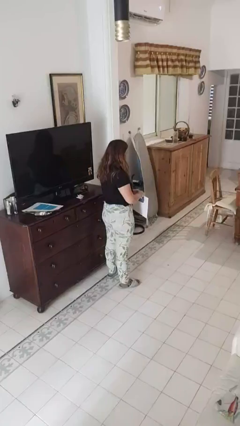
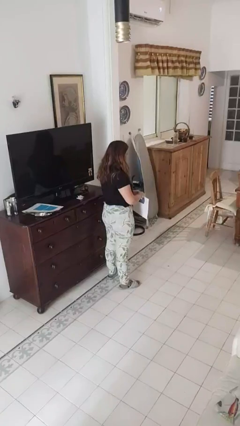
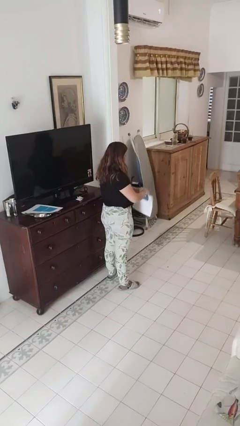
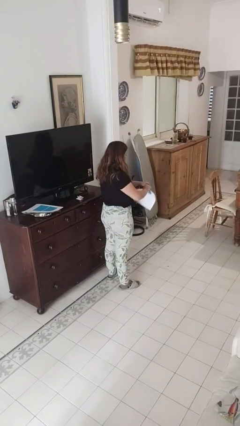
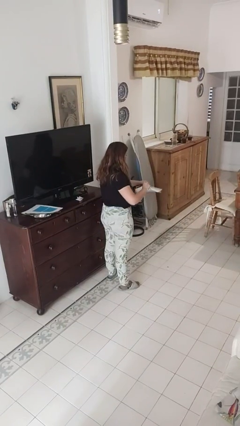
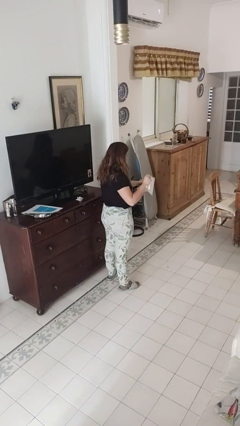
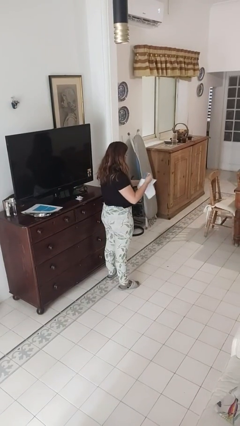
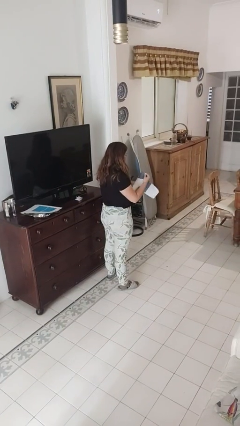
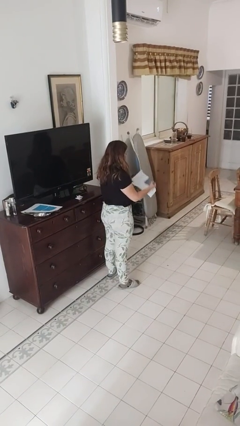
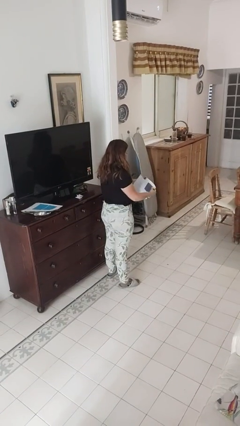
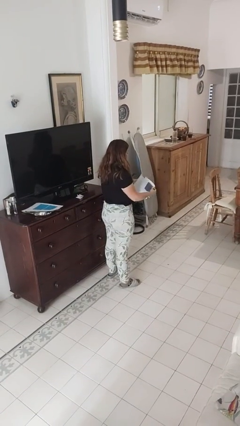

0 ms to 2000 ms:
person tears paper

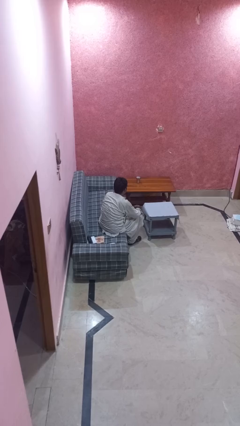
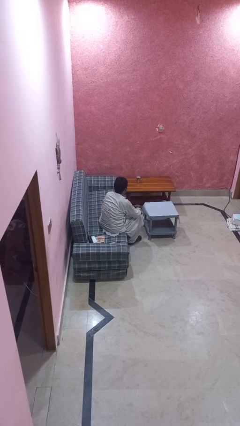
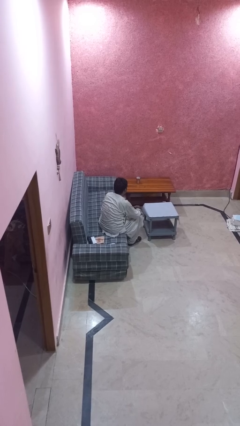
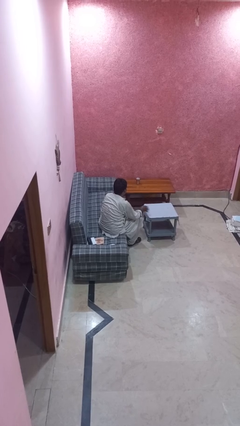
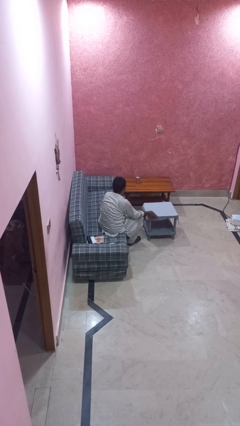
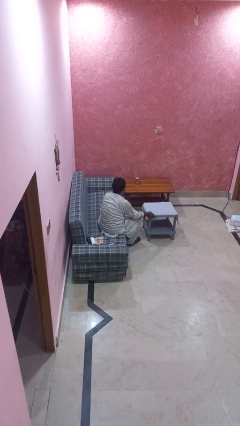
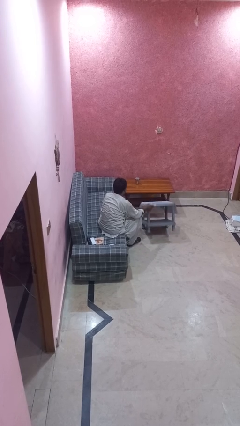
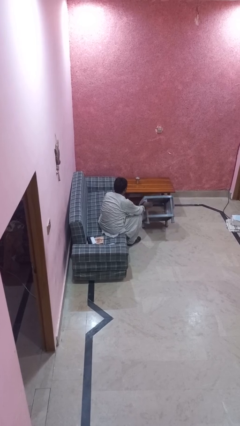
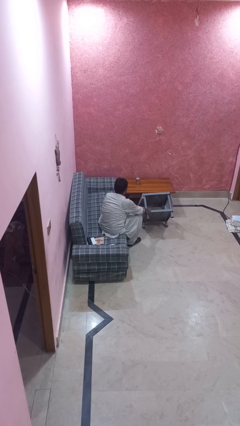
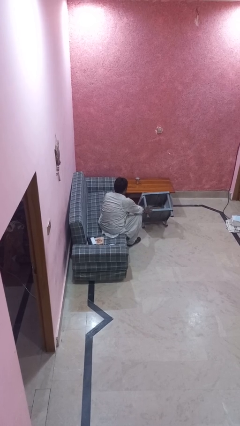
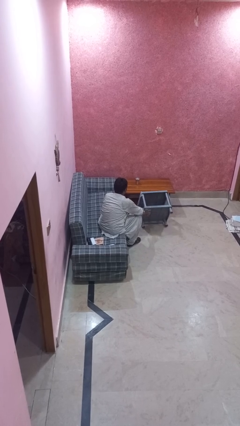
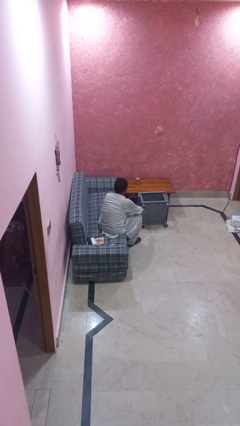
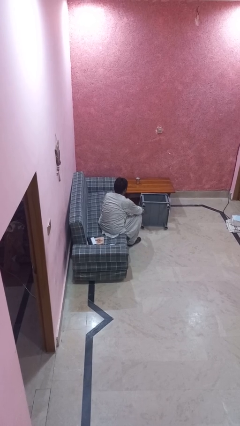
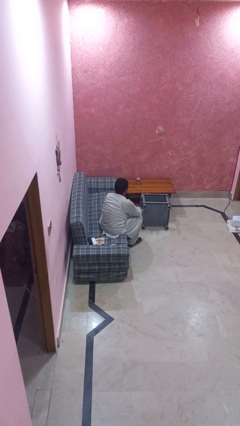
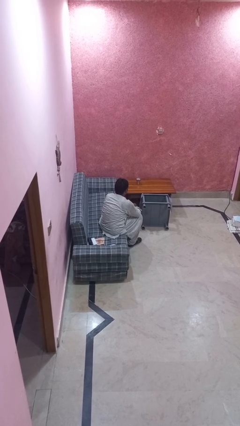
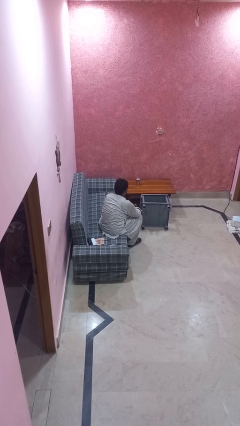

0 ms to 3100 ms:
person knocks over furniture

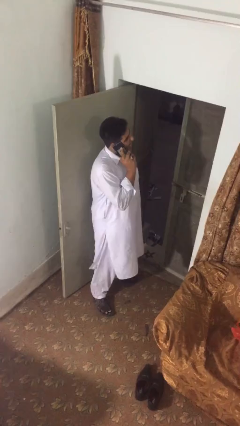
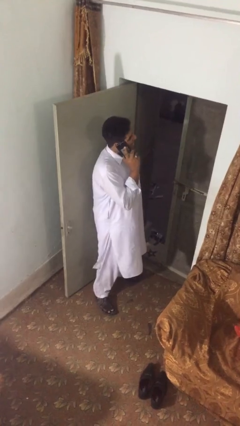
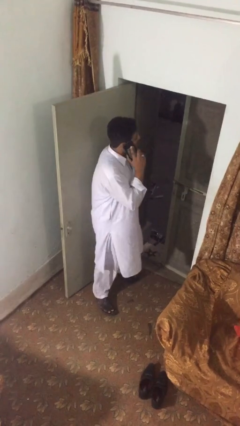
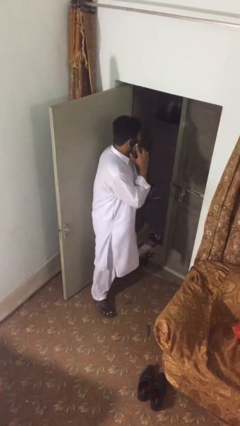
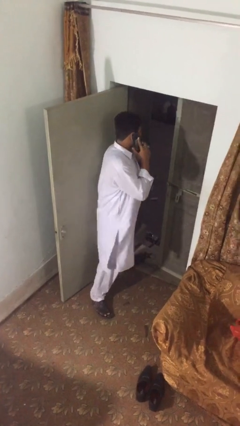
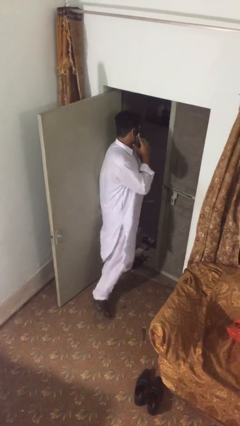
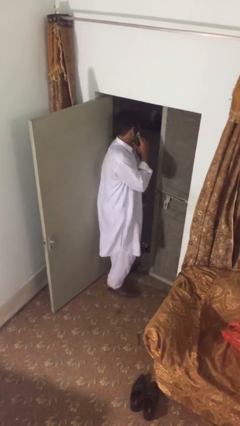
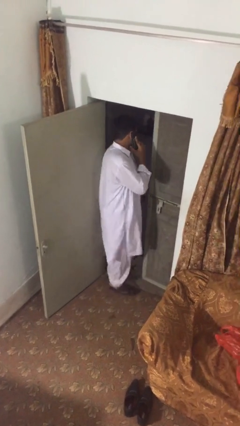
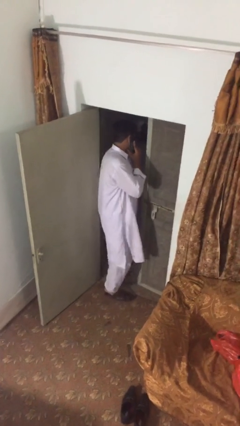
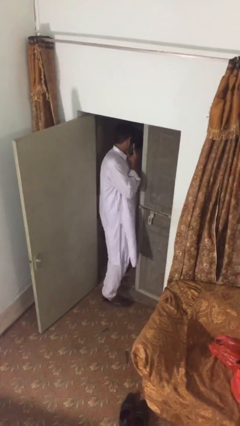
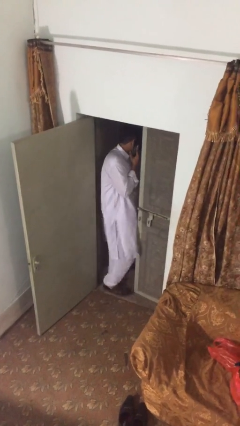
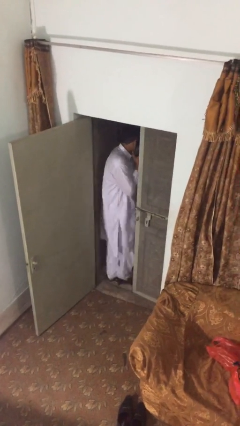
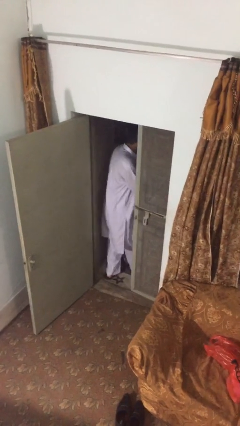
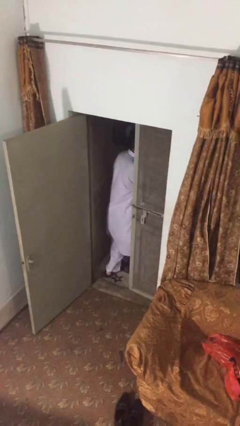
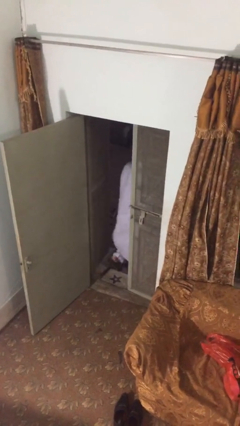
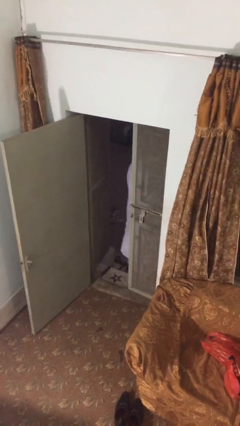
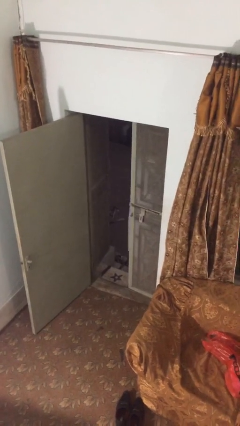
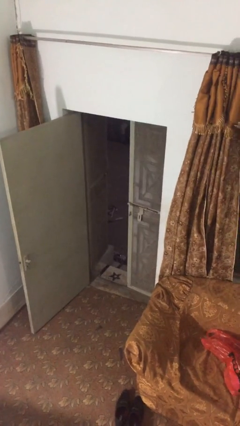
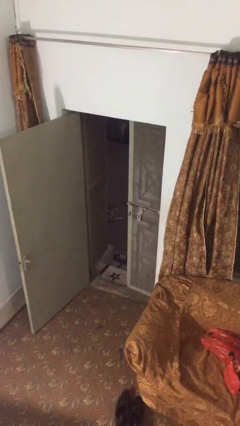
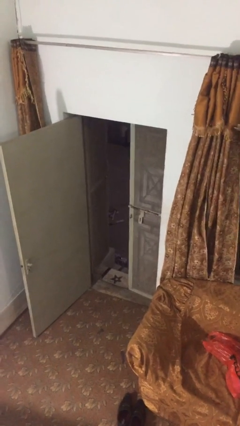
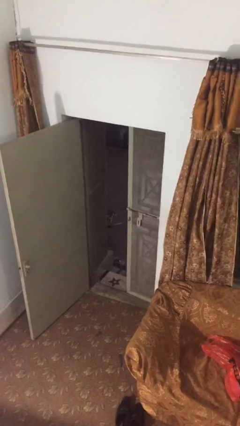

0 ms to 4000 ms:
person exits scene through structure

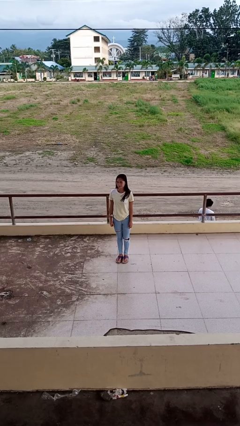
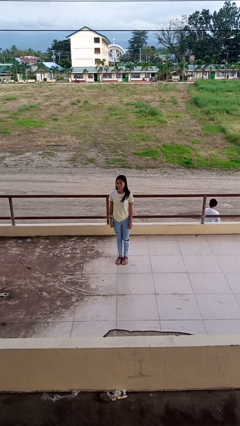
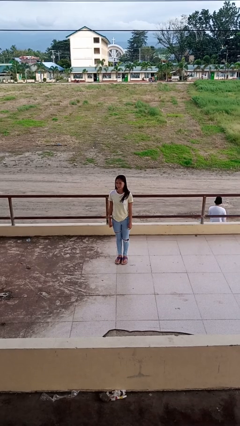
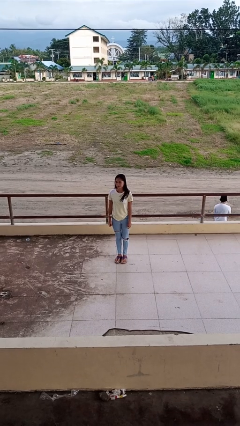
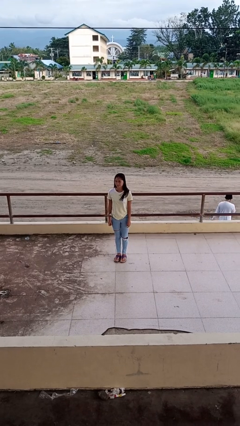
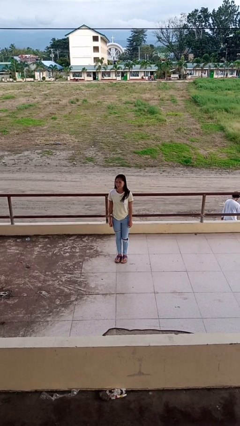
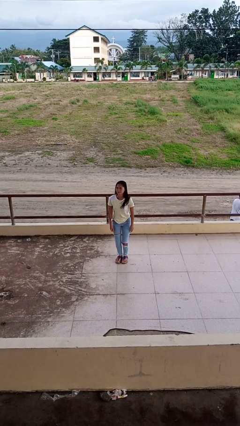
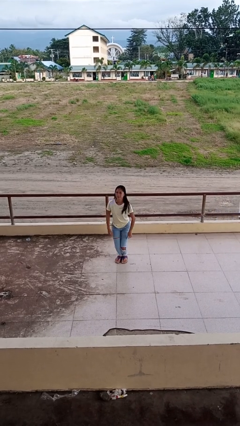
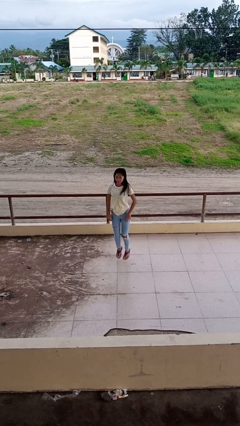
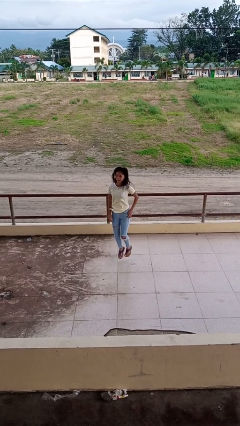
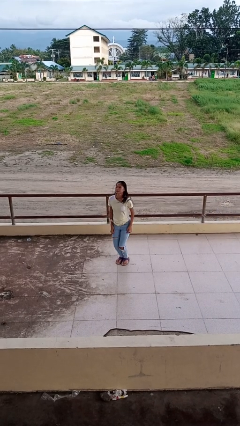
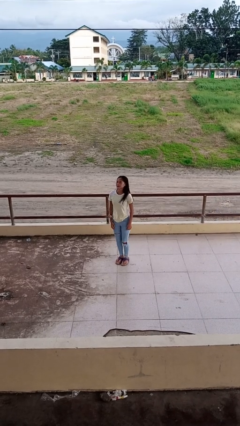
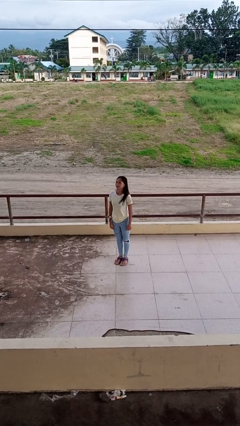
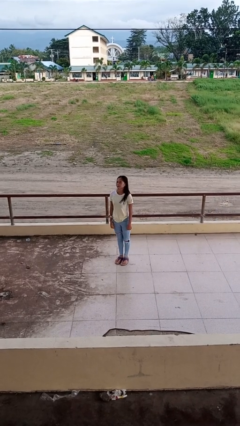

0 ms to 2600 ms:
person jumps

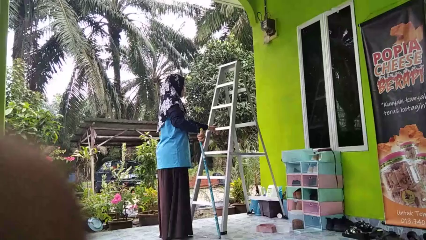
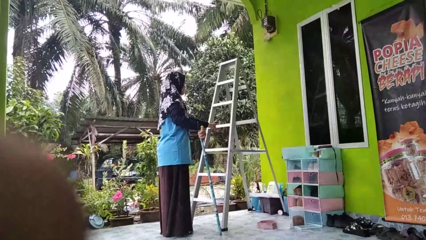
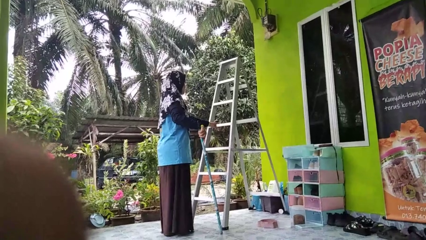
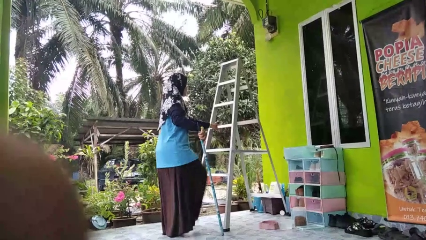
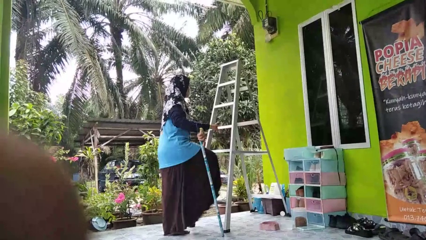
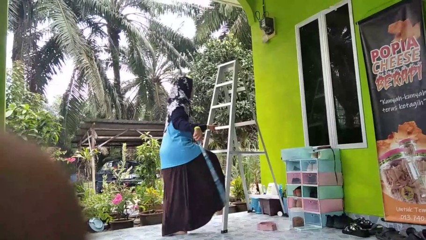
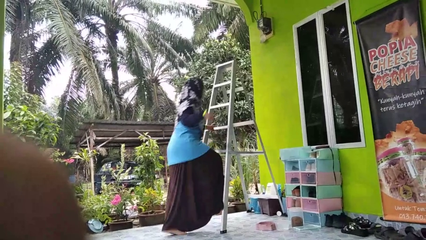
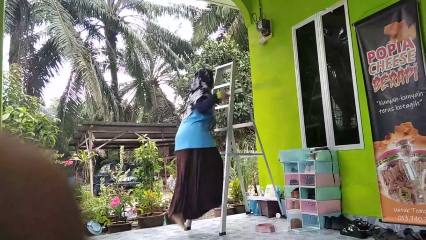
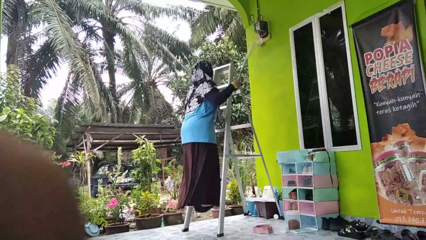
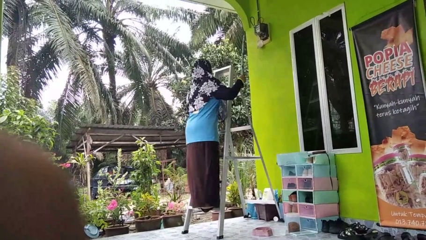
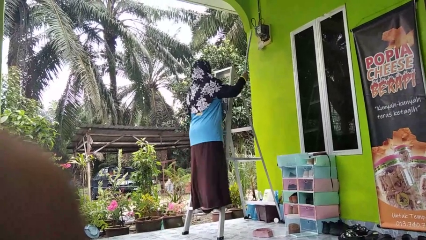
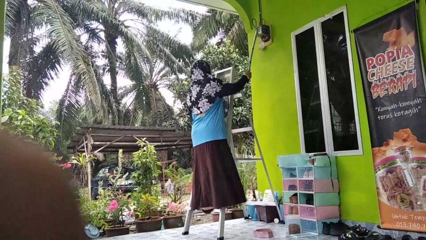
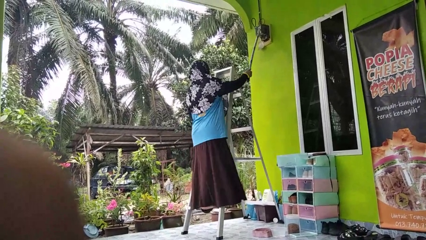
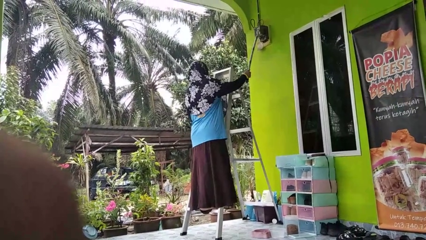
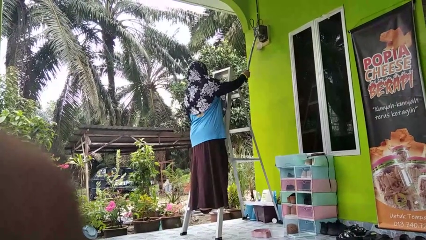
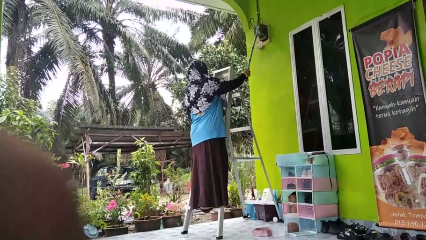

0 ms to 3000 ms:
person climbs up ladder

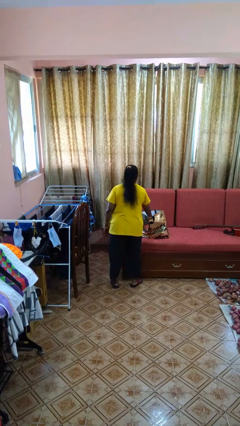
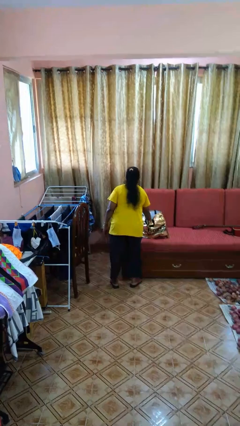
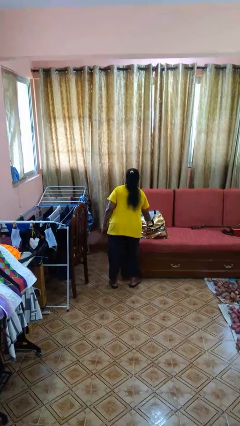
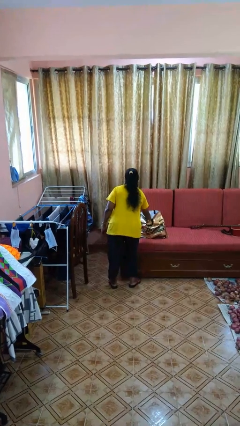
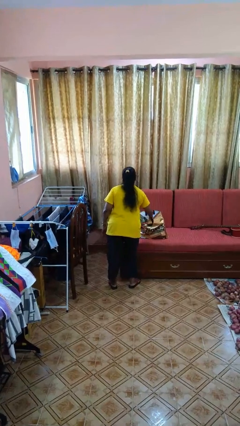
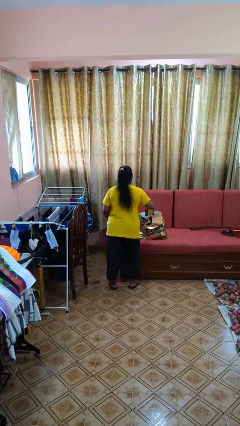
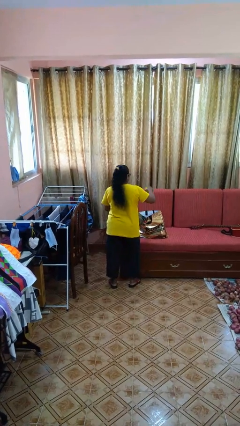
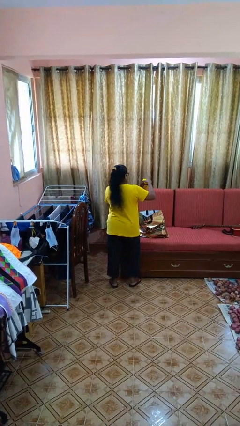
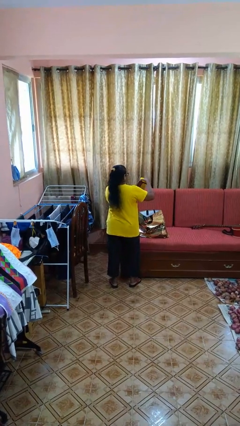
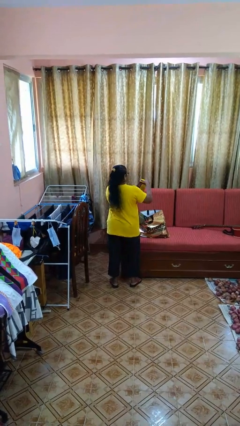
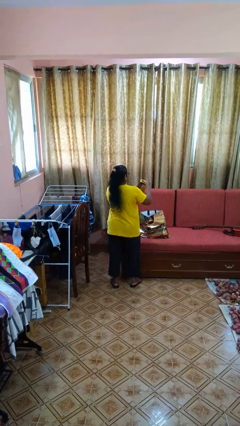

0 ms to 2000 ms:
person takes object from bag

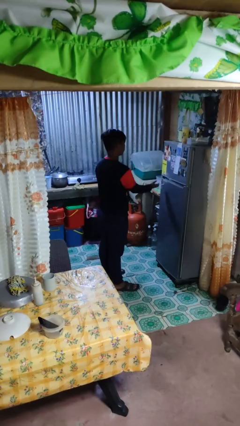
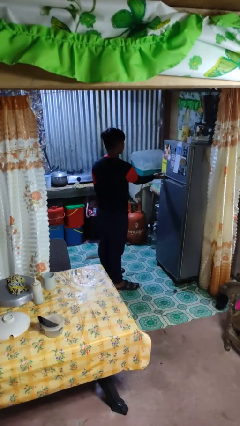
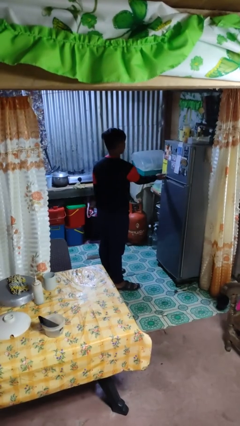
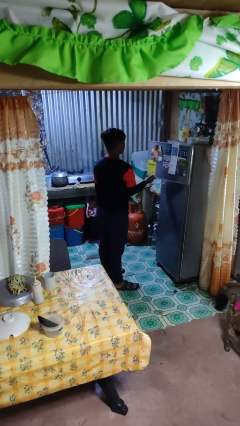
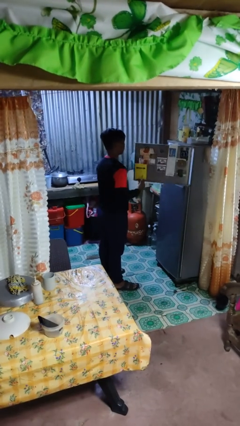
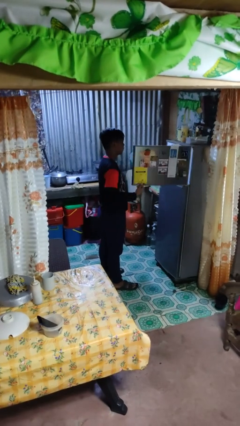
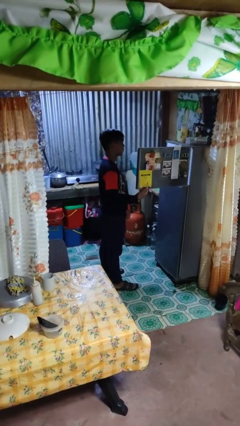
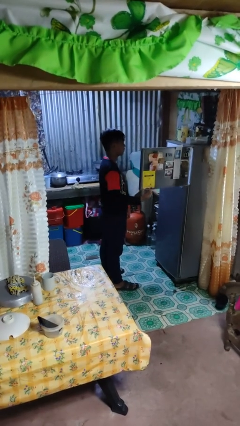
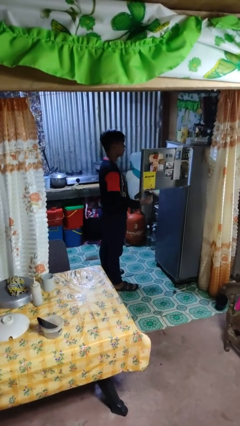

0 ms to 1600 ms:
person opens refrigerator
